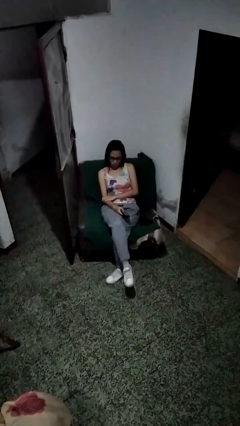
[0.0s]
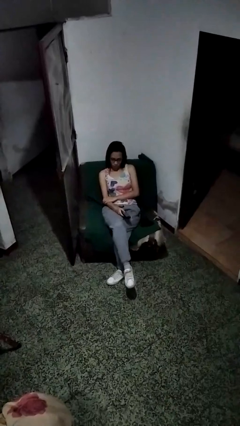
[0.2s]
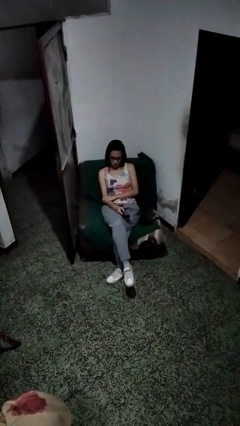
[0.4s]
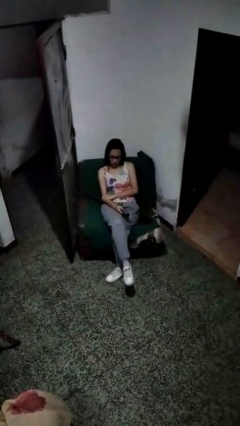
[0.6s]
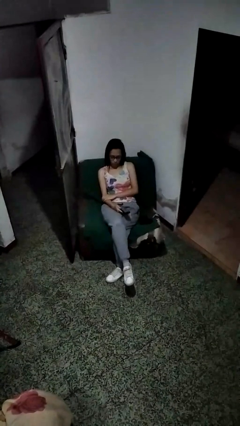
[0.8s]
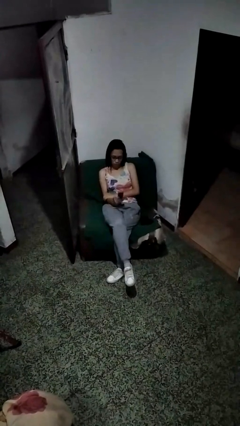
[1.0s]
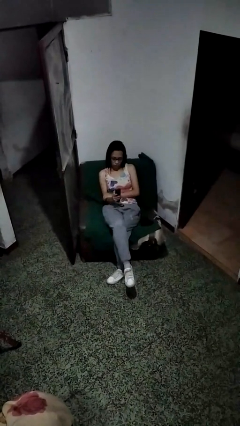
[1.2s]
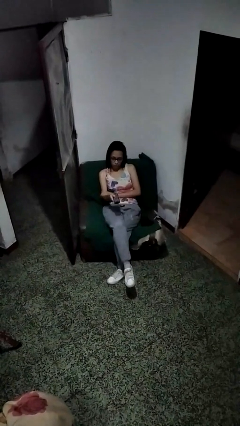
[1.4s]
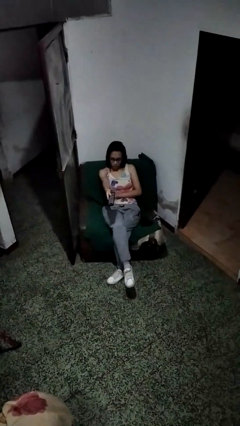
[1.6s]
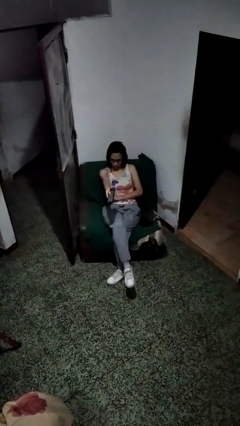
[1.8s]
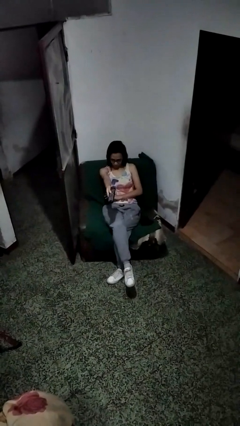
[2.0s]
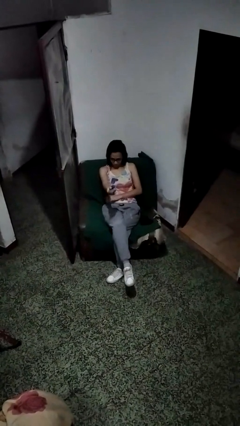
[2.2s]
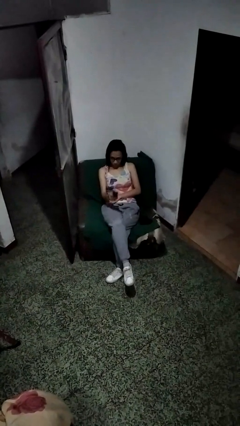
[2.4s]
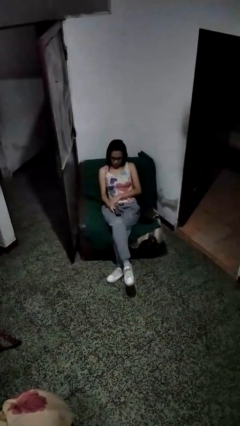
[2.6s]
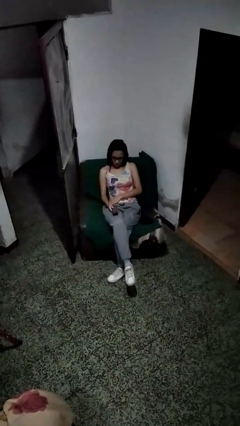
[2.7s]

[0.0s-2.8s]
person uses television remote

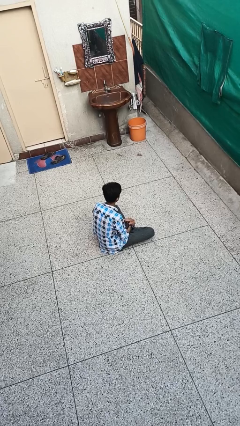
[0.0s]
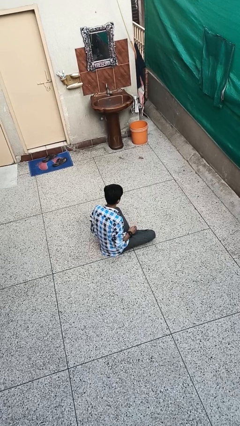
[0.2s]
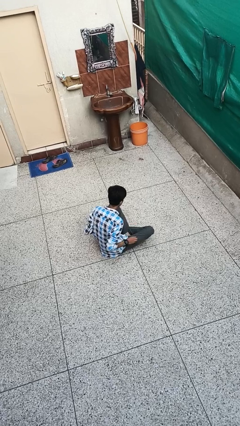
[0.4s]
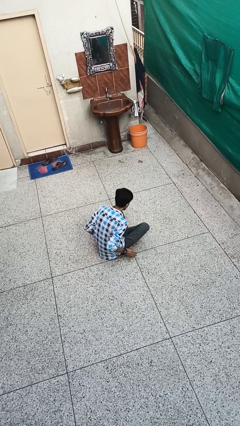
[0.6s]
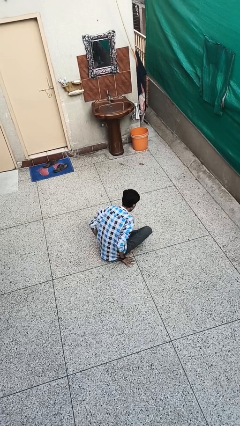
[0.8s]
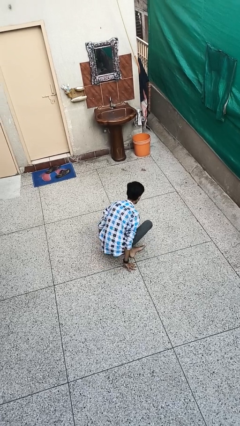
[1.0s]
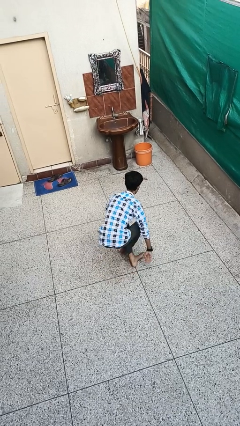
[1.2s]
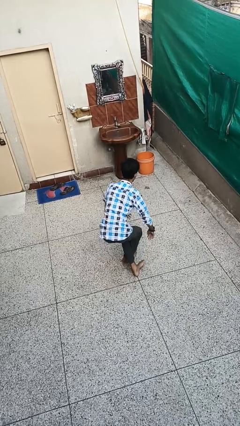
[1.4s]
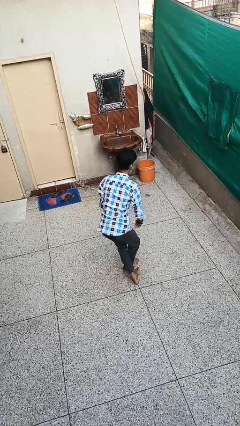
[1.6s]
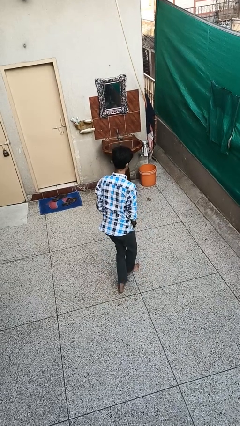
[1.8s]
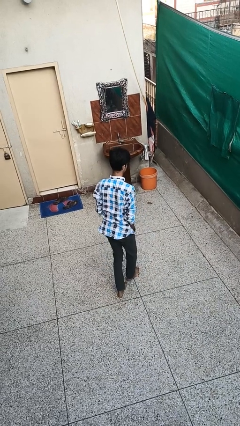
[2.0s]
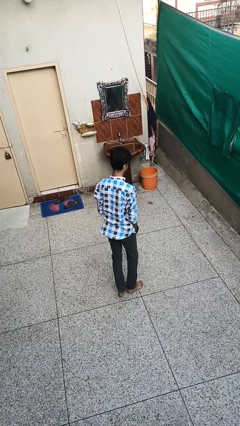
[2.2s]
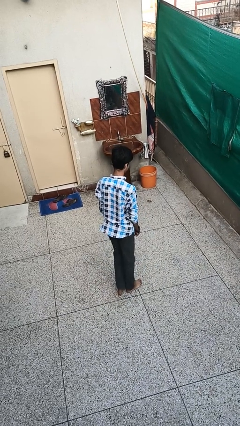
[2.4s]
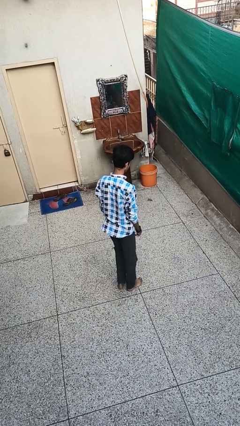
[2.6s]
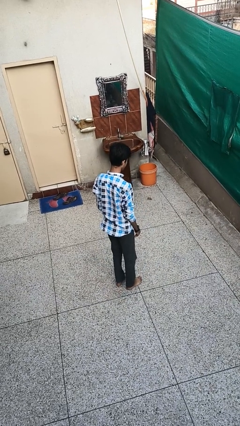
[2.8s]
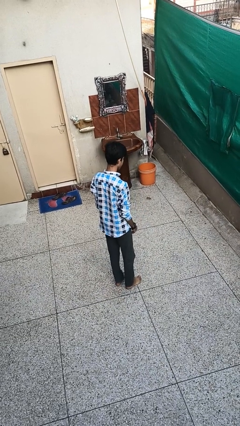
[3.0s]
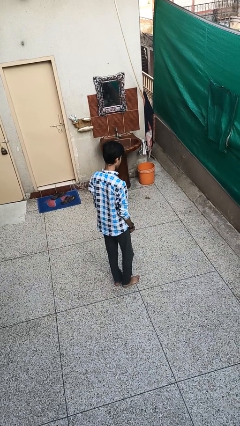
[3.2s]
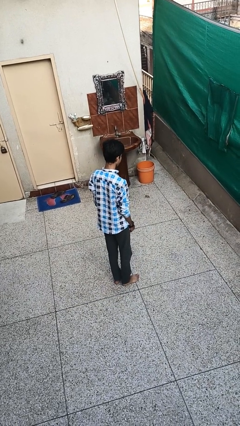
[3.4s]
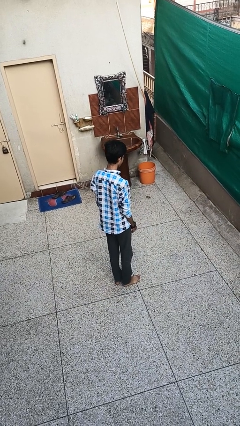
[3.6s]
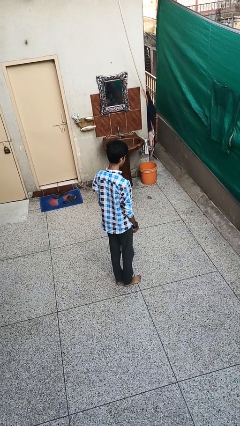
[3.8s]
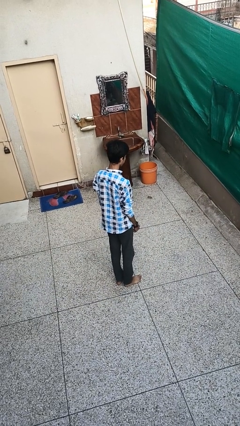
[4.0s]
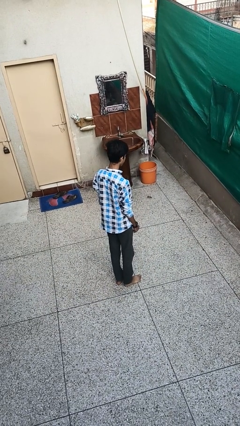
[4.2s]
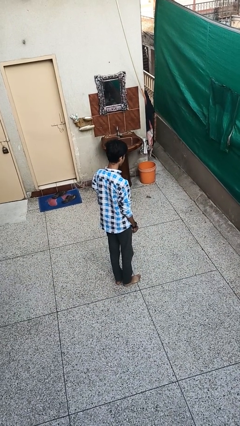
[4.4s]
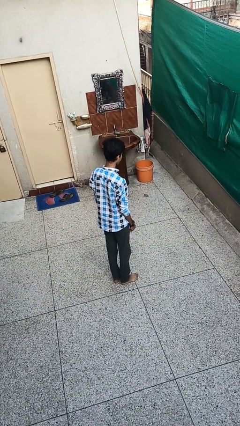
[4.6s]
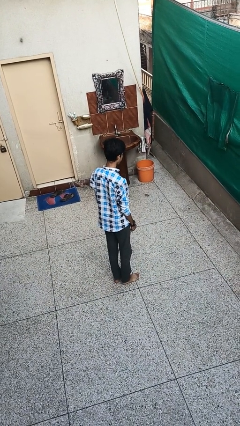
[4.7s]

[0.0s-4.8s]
person stands up from floor

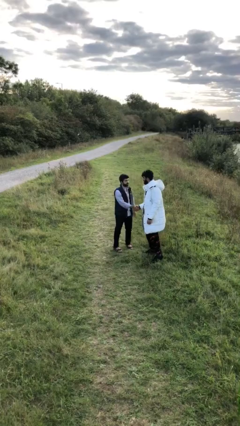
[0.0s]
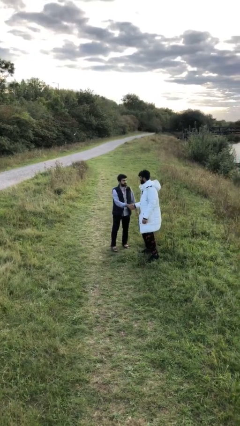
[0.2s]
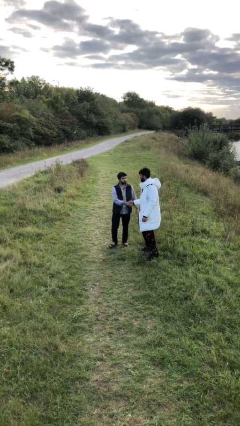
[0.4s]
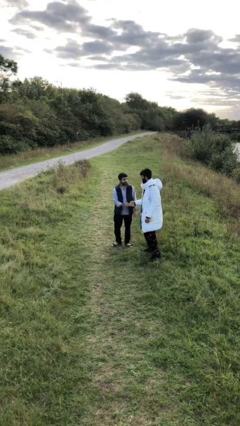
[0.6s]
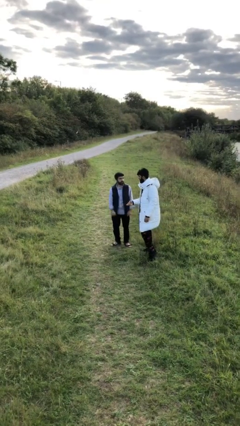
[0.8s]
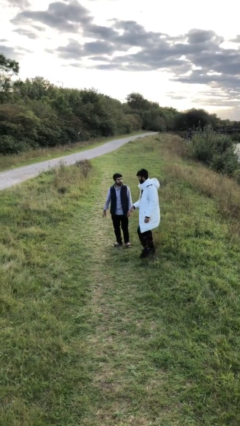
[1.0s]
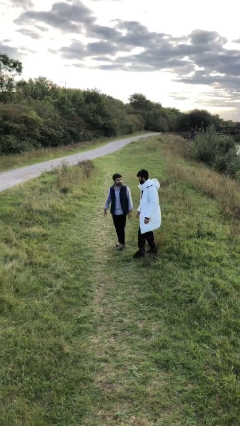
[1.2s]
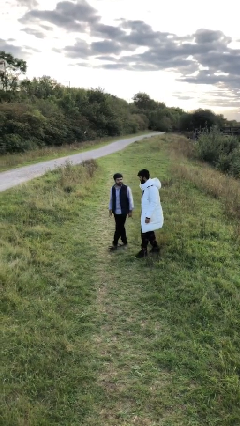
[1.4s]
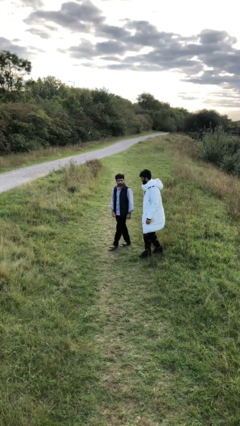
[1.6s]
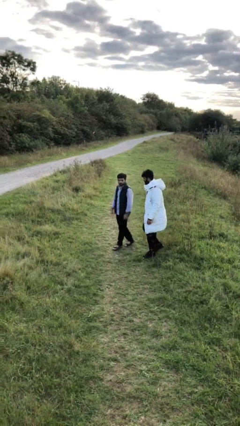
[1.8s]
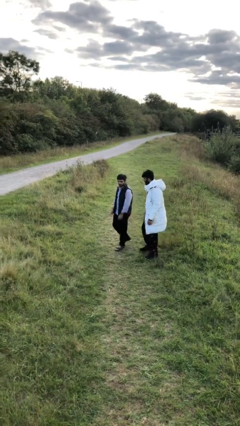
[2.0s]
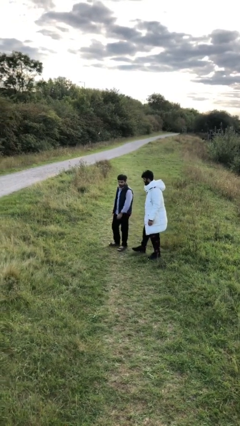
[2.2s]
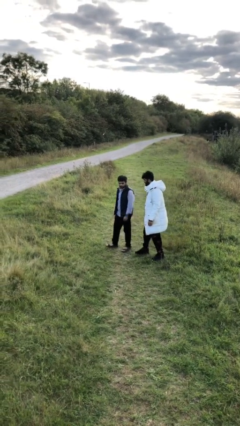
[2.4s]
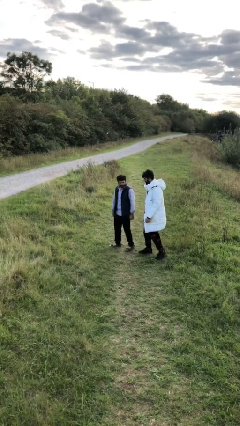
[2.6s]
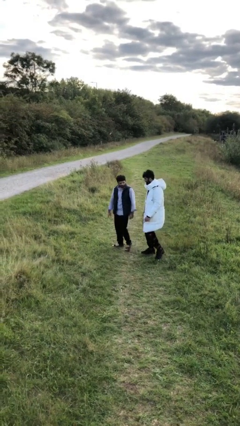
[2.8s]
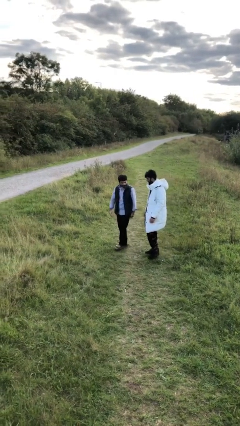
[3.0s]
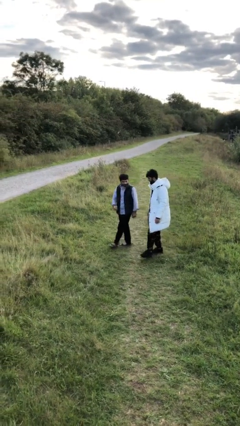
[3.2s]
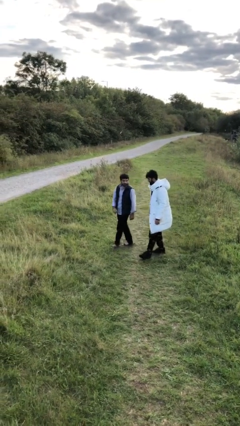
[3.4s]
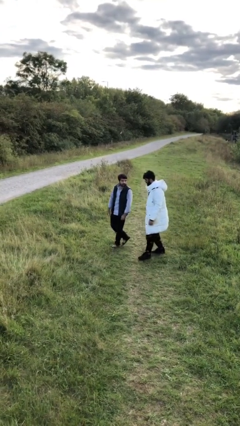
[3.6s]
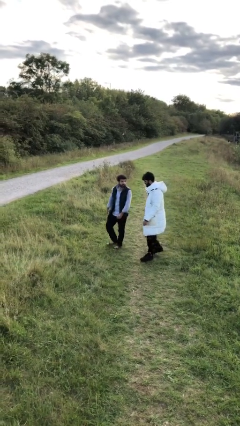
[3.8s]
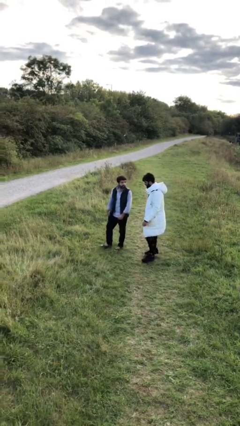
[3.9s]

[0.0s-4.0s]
person talks to person

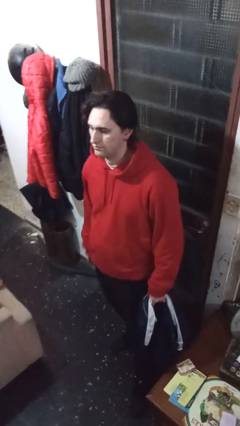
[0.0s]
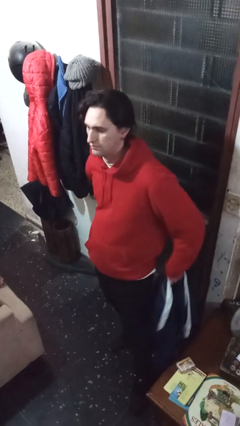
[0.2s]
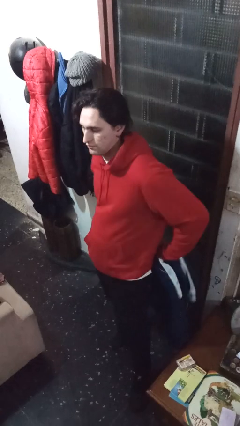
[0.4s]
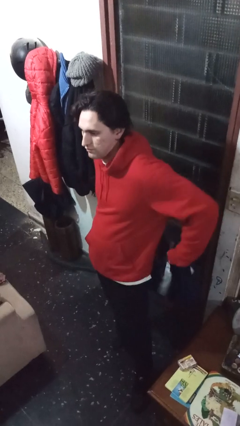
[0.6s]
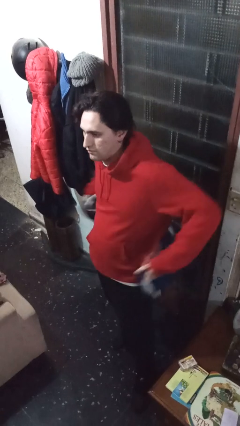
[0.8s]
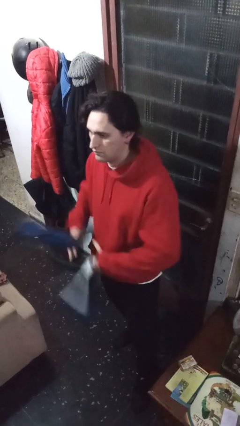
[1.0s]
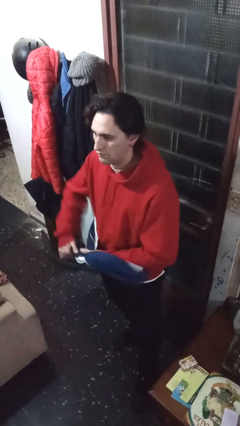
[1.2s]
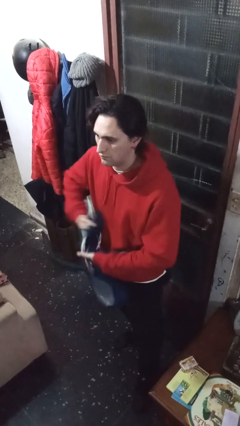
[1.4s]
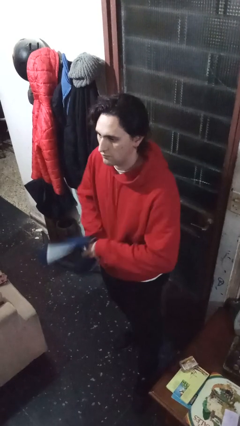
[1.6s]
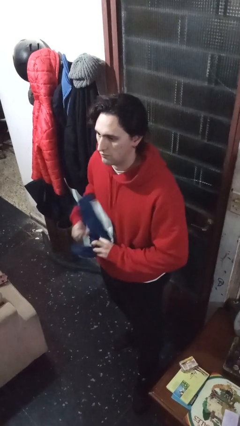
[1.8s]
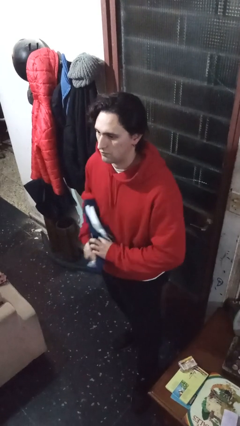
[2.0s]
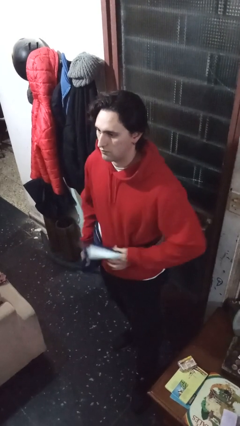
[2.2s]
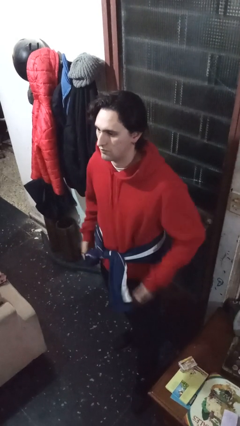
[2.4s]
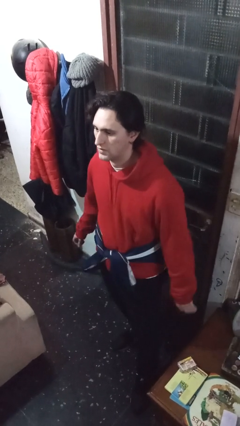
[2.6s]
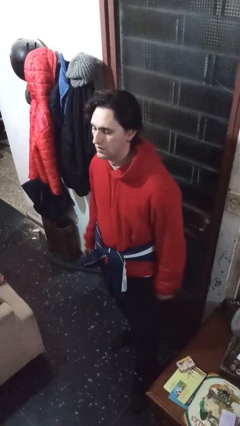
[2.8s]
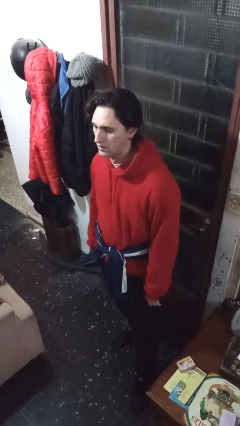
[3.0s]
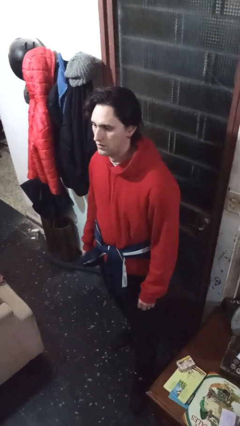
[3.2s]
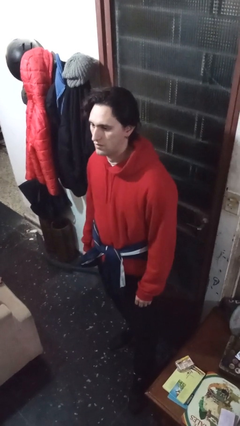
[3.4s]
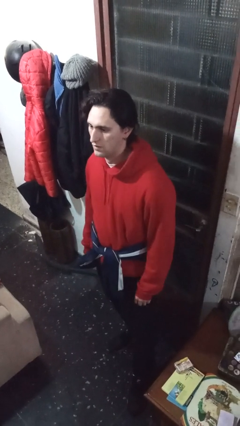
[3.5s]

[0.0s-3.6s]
person ties jacket around waist

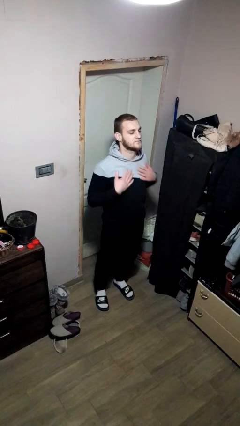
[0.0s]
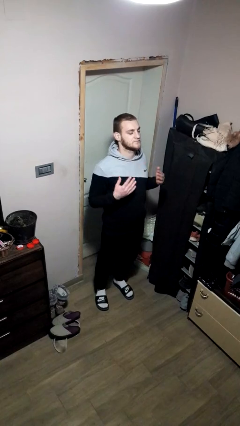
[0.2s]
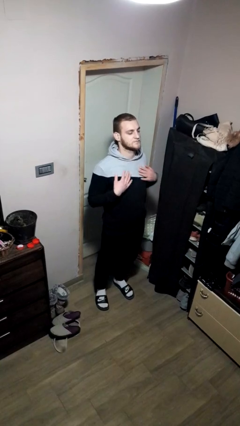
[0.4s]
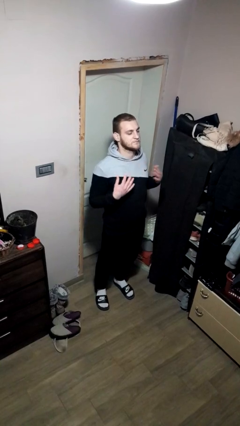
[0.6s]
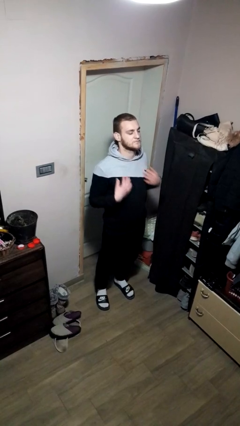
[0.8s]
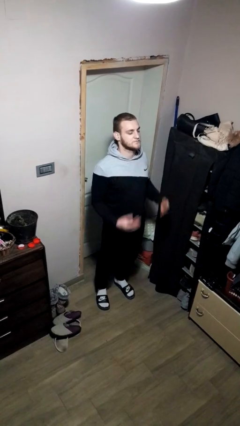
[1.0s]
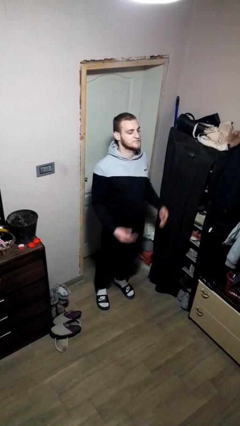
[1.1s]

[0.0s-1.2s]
person drums on chest

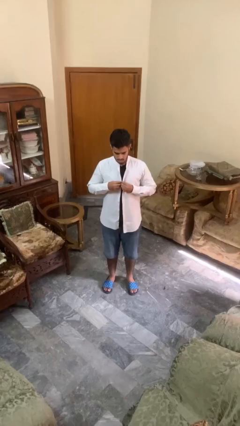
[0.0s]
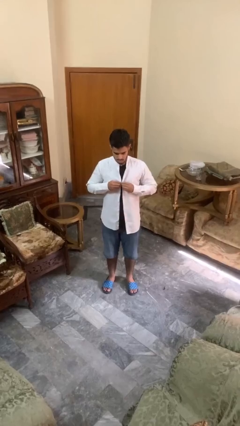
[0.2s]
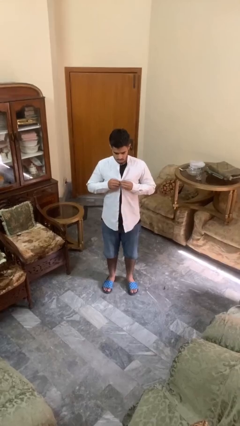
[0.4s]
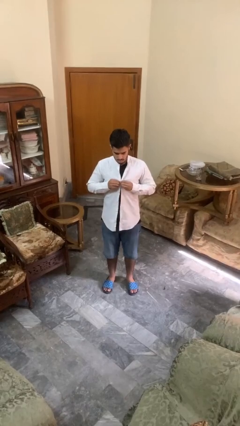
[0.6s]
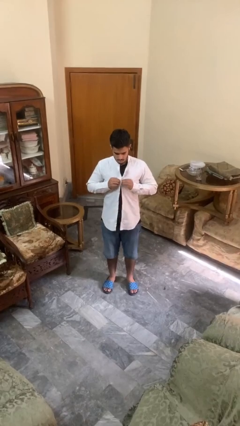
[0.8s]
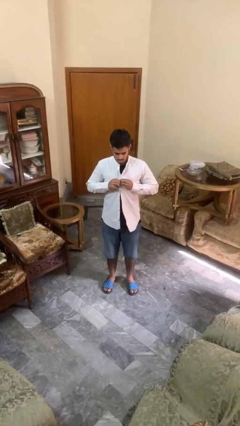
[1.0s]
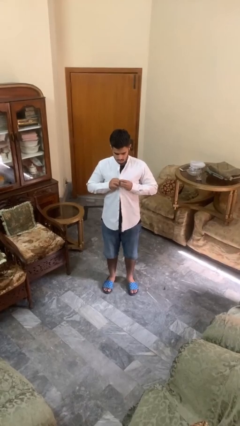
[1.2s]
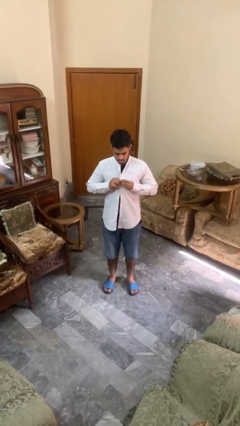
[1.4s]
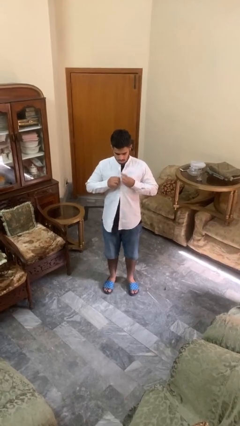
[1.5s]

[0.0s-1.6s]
person buttons shirt
